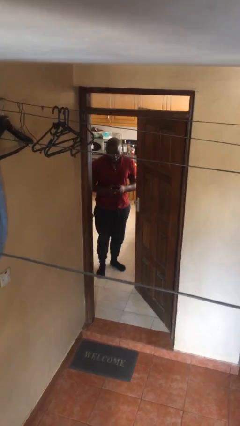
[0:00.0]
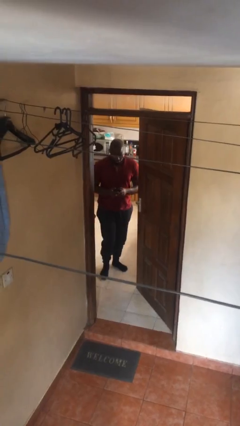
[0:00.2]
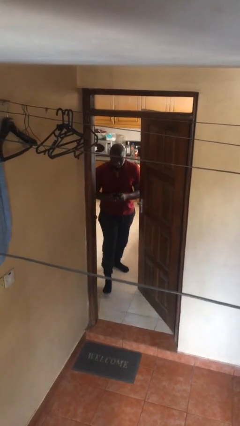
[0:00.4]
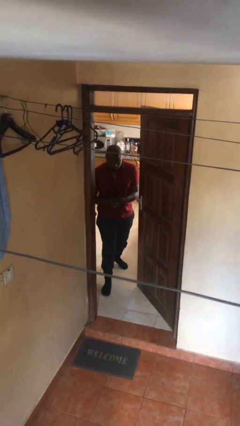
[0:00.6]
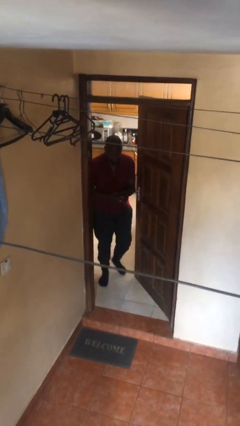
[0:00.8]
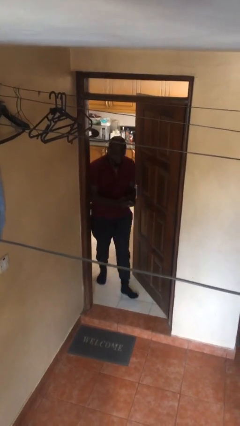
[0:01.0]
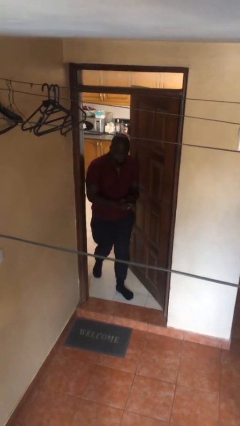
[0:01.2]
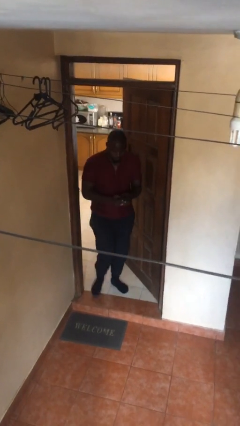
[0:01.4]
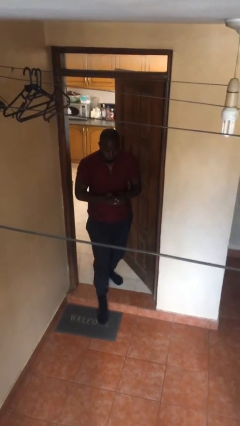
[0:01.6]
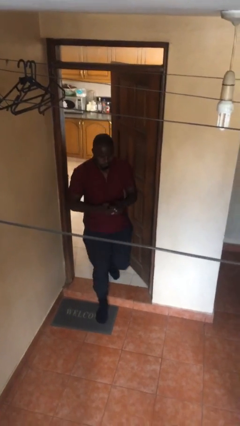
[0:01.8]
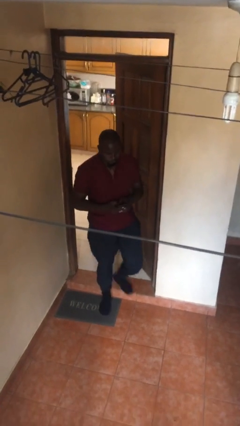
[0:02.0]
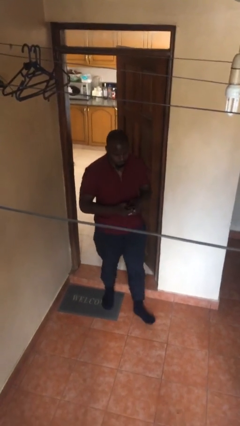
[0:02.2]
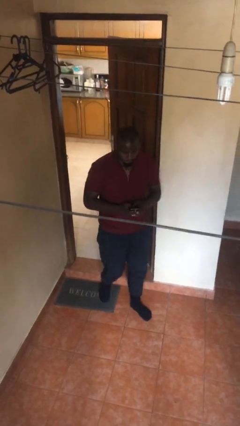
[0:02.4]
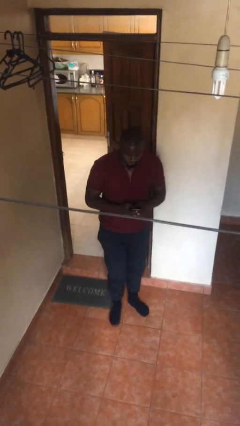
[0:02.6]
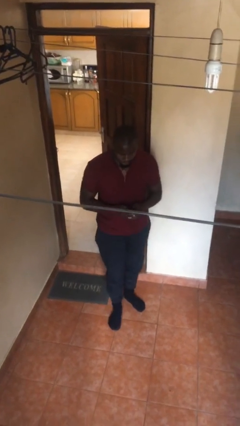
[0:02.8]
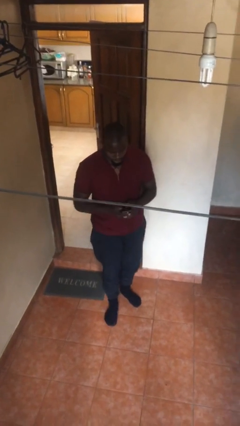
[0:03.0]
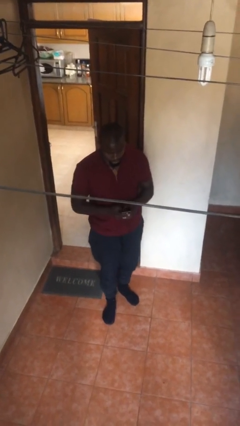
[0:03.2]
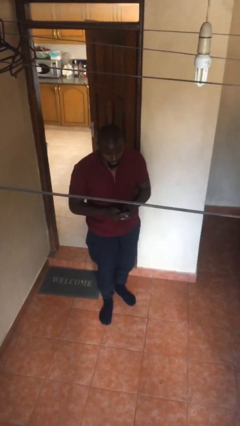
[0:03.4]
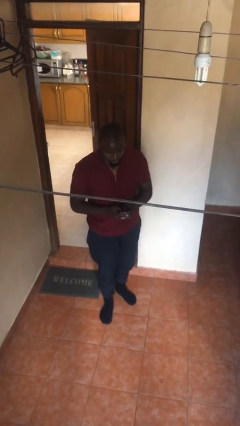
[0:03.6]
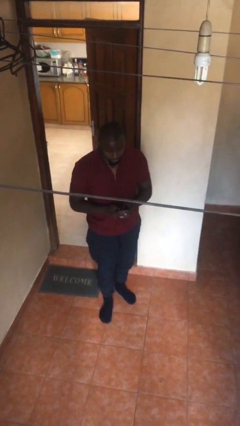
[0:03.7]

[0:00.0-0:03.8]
person enters scene through structure

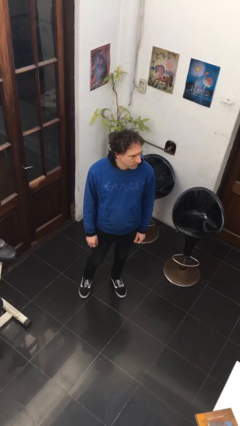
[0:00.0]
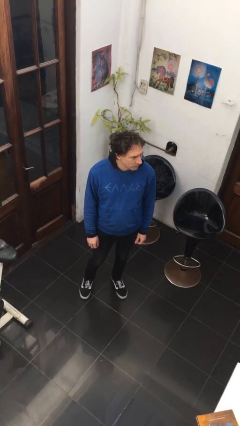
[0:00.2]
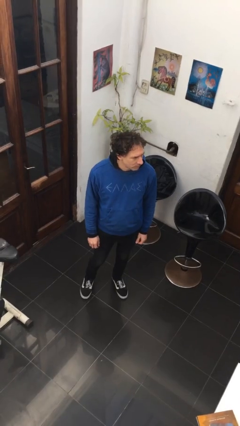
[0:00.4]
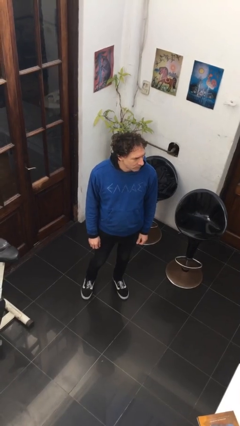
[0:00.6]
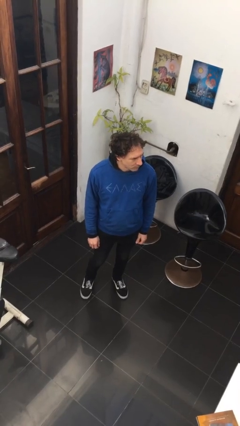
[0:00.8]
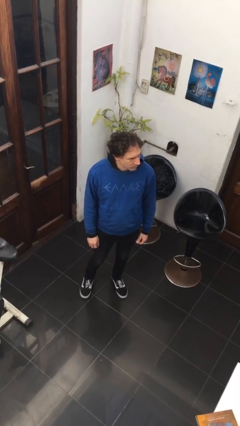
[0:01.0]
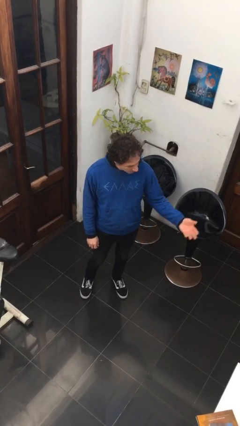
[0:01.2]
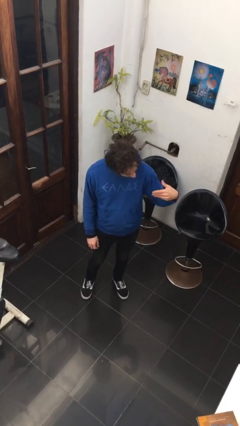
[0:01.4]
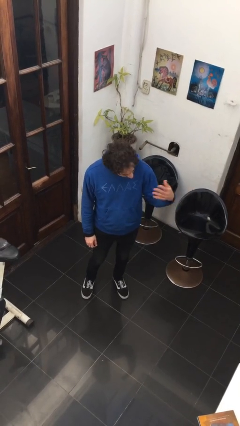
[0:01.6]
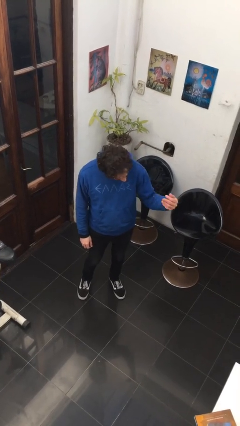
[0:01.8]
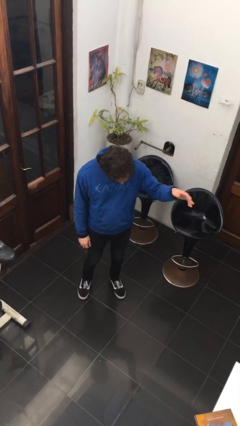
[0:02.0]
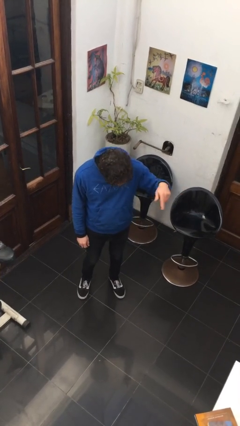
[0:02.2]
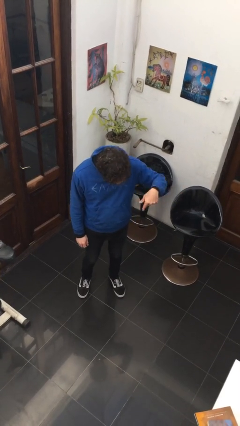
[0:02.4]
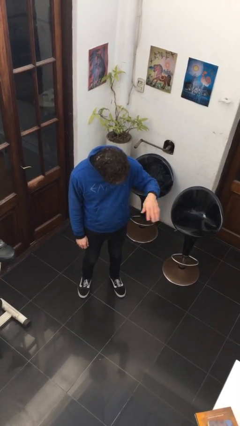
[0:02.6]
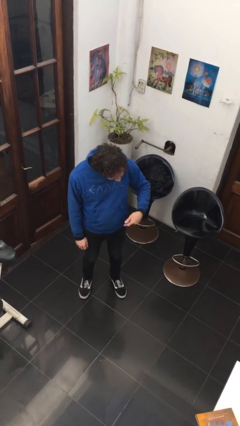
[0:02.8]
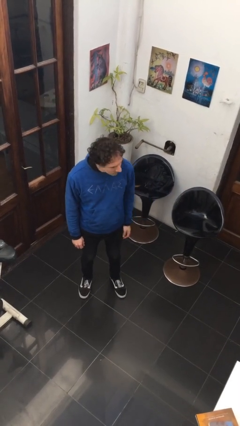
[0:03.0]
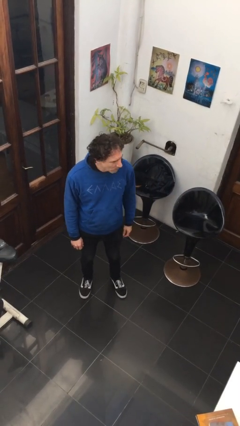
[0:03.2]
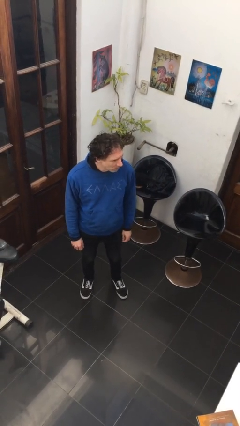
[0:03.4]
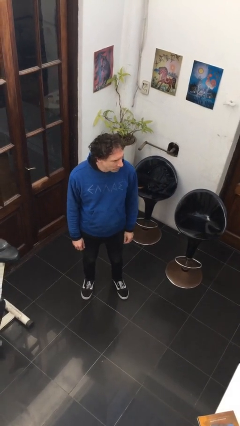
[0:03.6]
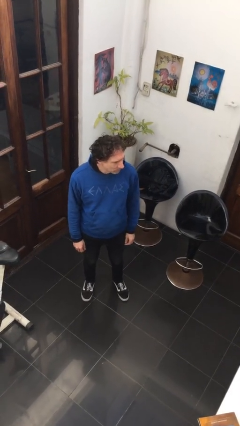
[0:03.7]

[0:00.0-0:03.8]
person gestures come here

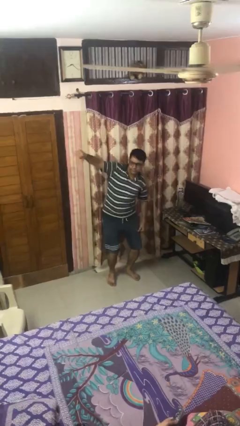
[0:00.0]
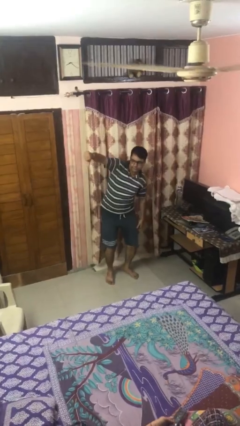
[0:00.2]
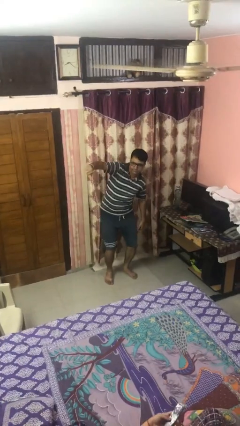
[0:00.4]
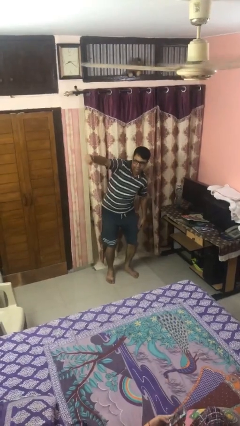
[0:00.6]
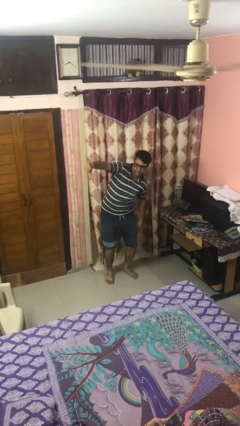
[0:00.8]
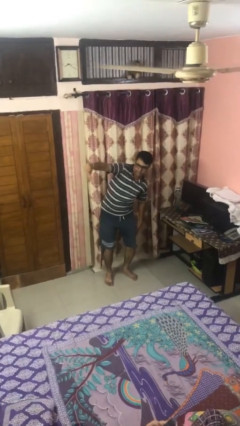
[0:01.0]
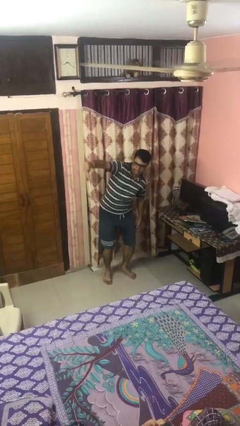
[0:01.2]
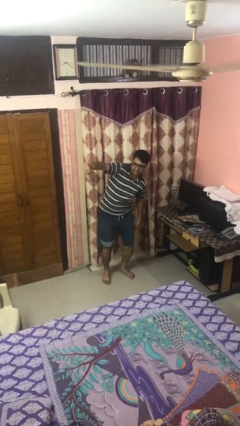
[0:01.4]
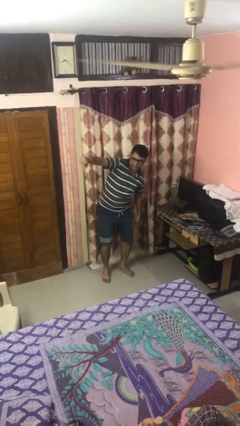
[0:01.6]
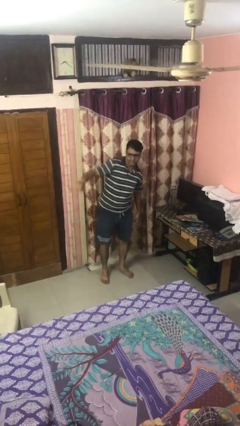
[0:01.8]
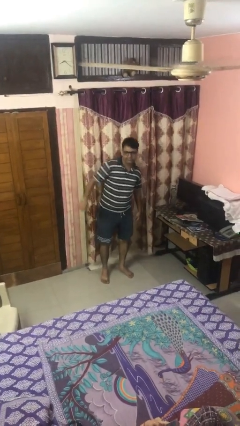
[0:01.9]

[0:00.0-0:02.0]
person gestures thumbs down

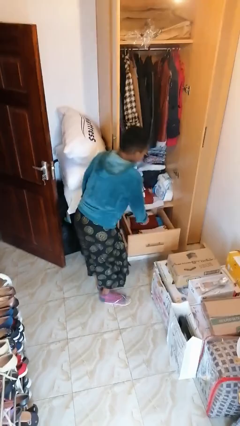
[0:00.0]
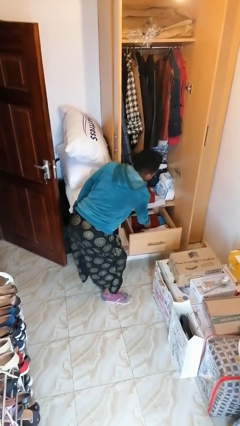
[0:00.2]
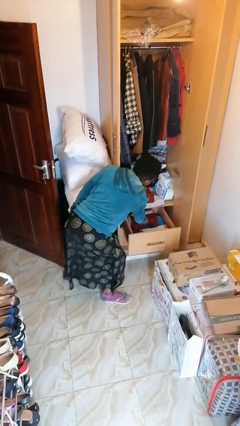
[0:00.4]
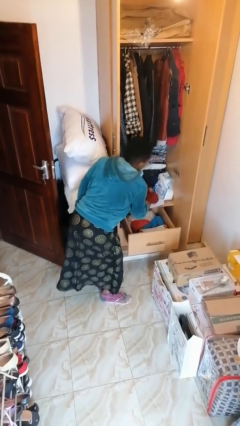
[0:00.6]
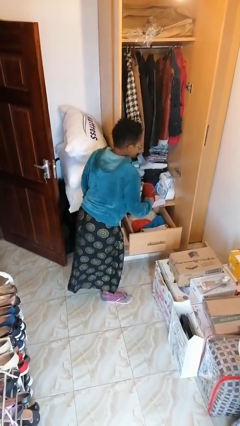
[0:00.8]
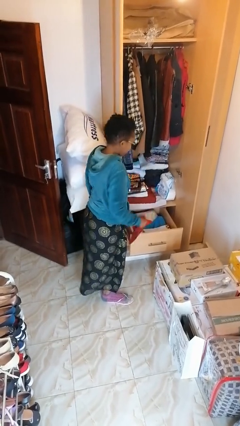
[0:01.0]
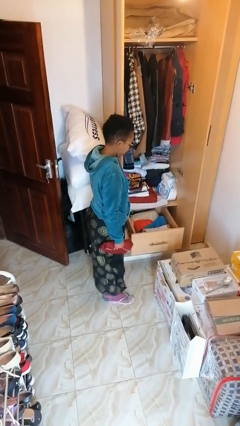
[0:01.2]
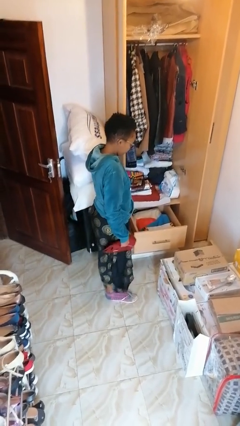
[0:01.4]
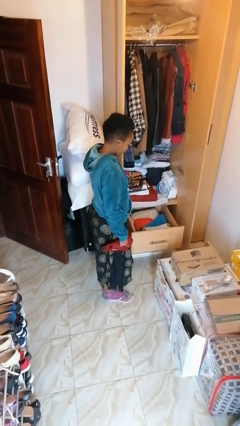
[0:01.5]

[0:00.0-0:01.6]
person takes clothes from dresser

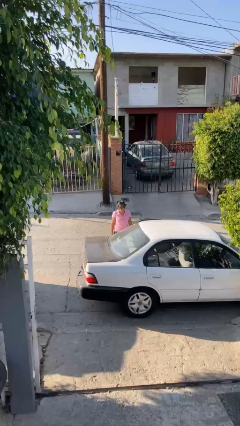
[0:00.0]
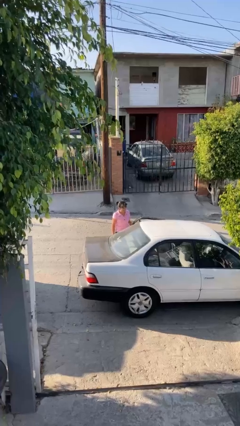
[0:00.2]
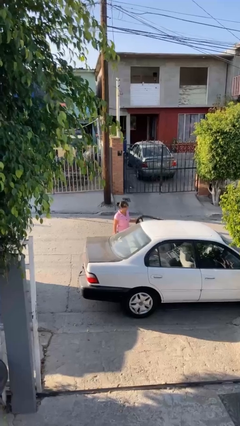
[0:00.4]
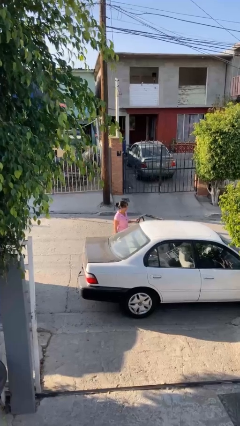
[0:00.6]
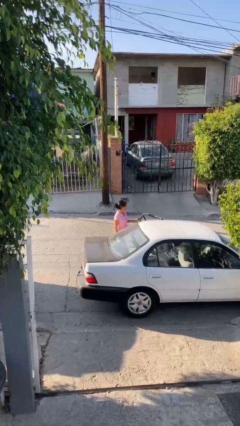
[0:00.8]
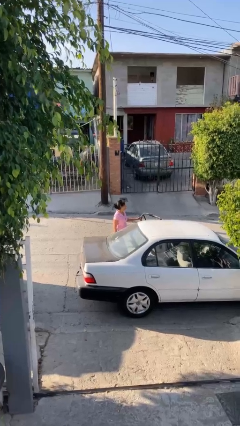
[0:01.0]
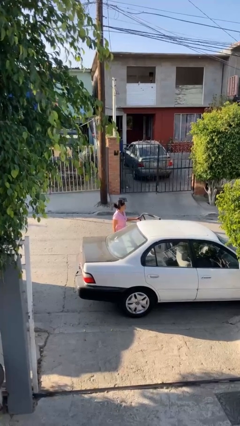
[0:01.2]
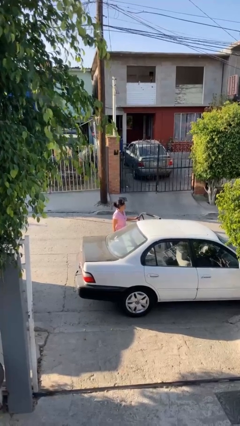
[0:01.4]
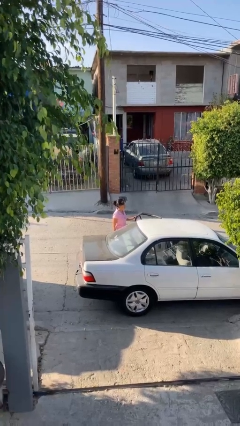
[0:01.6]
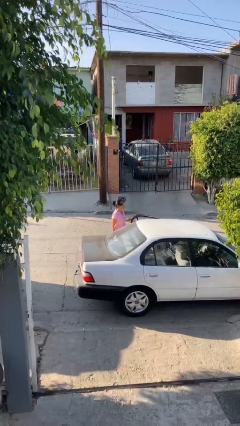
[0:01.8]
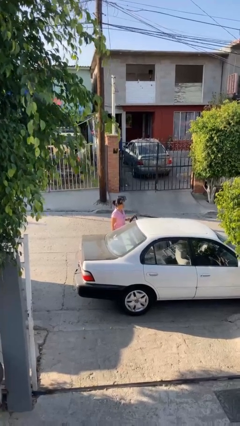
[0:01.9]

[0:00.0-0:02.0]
person opens car door

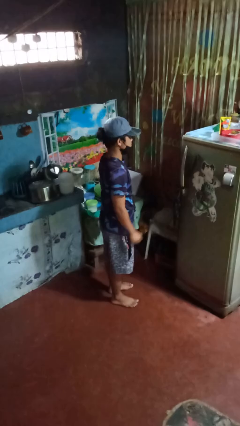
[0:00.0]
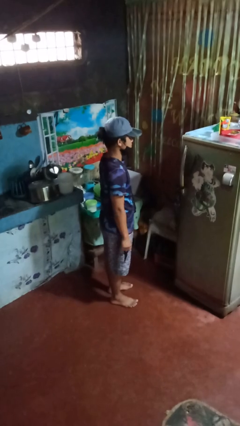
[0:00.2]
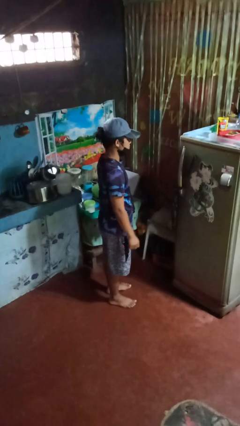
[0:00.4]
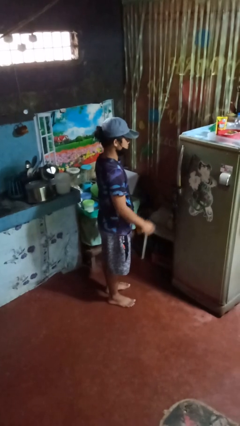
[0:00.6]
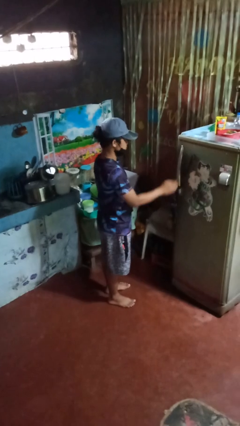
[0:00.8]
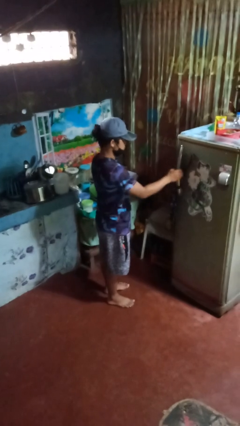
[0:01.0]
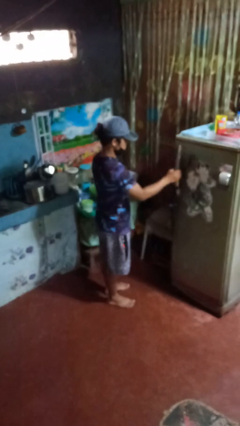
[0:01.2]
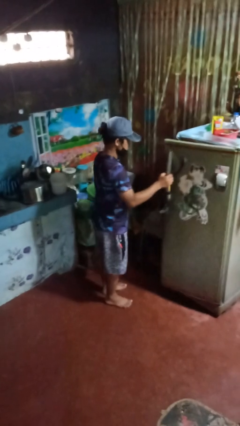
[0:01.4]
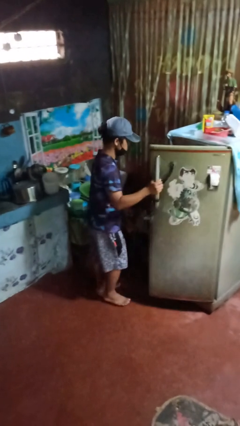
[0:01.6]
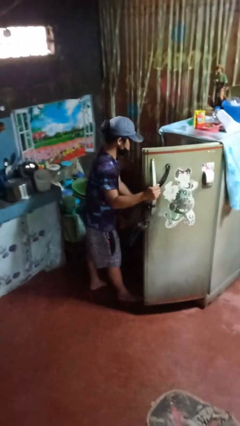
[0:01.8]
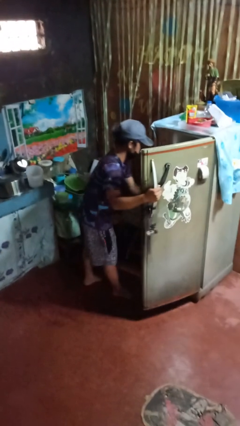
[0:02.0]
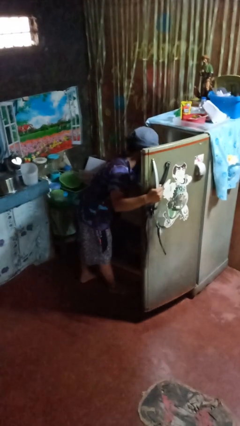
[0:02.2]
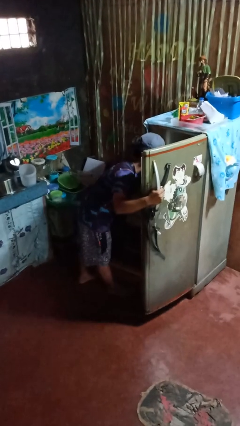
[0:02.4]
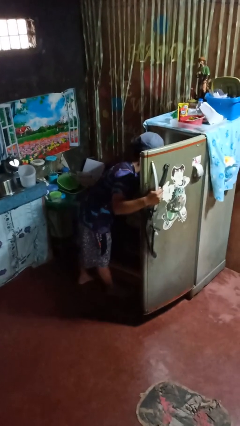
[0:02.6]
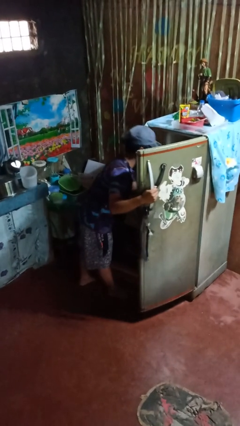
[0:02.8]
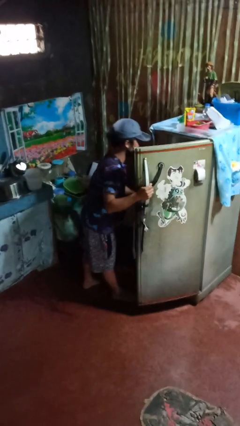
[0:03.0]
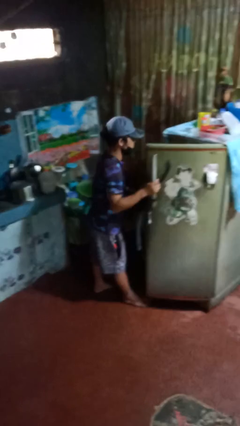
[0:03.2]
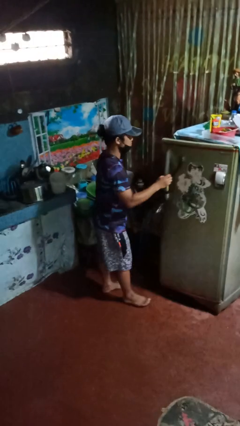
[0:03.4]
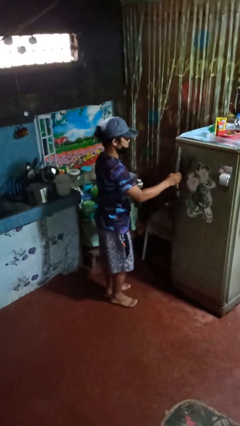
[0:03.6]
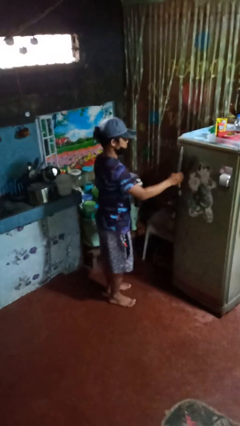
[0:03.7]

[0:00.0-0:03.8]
person takes object from refrigerator

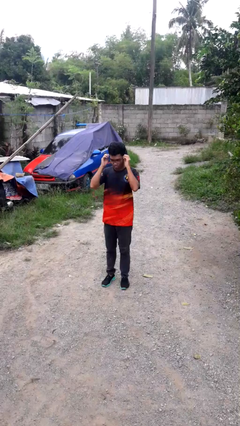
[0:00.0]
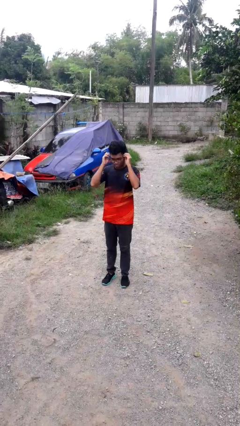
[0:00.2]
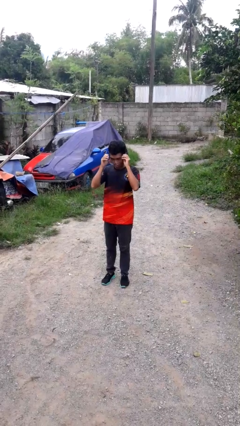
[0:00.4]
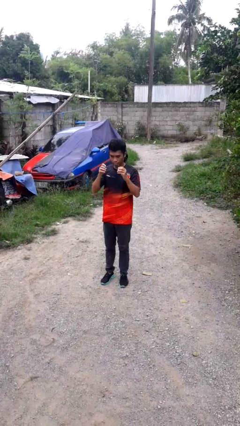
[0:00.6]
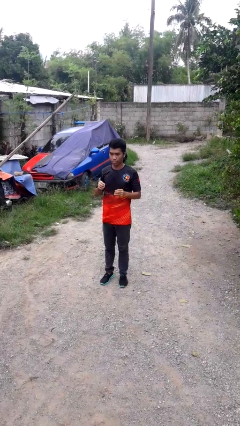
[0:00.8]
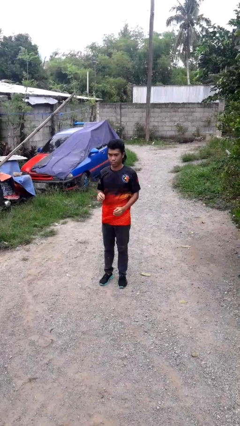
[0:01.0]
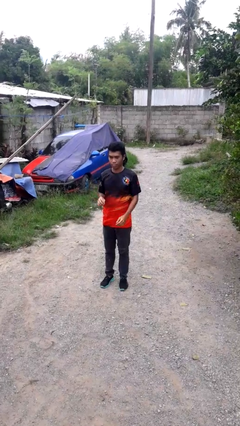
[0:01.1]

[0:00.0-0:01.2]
person takes off glasses
